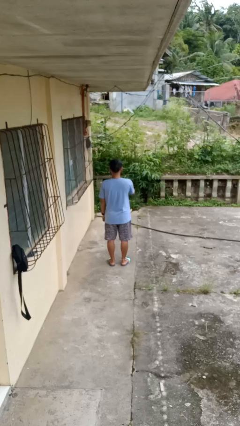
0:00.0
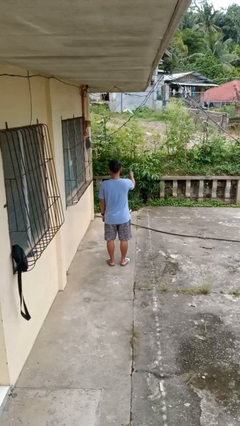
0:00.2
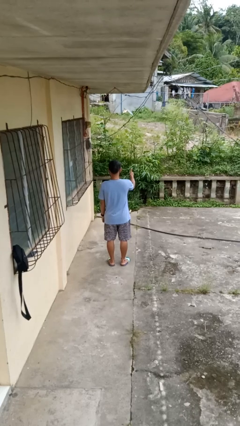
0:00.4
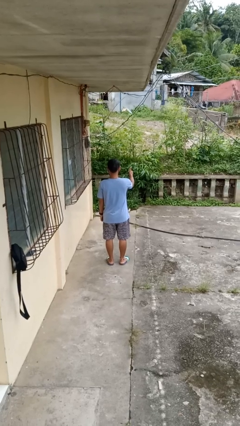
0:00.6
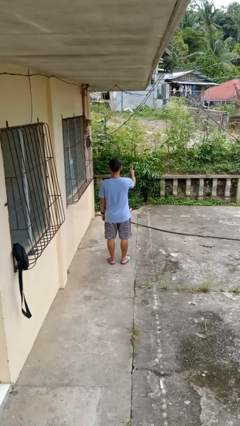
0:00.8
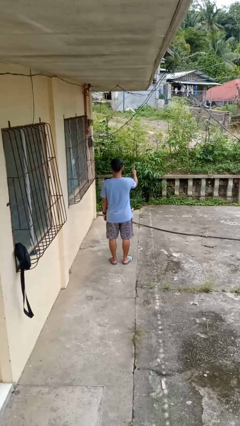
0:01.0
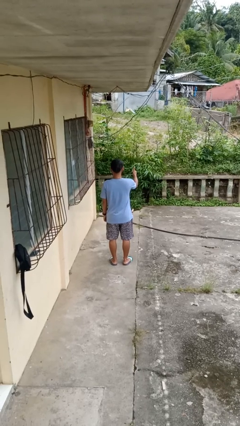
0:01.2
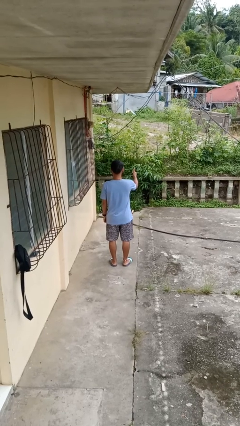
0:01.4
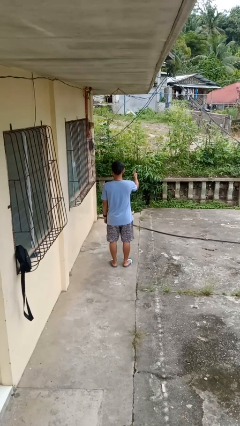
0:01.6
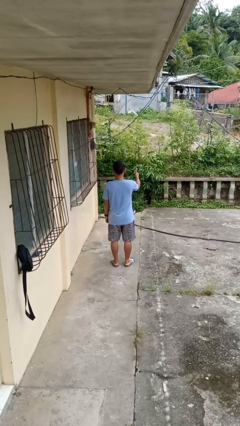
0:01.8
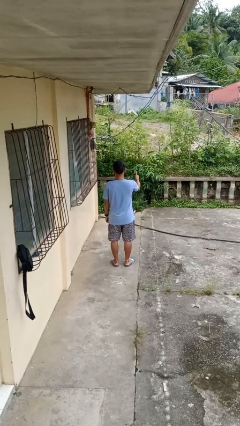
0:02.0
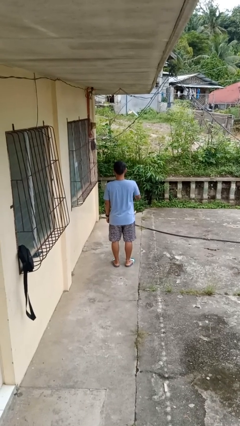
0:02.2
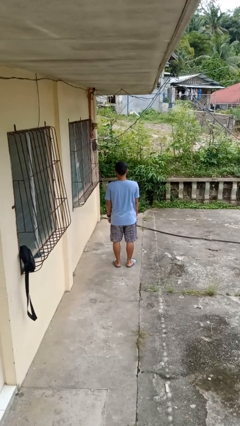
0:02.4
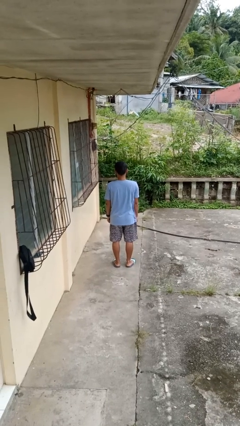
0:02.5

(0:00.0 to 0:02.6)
person gestures thumbs up

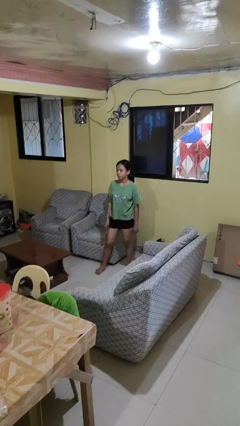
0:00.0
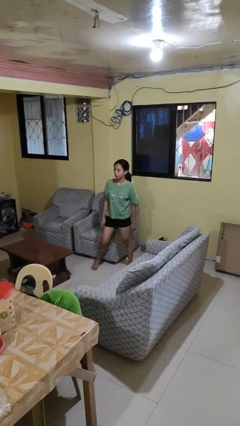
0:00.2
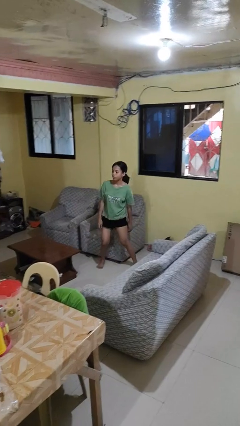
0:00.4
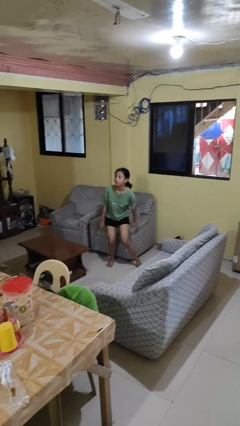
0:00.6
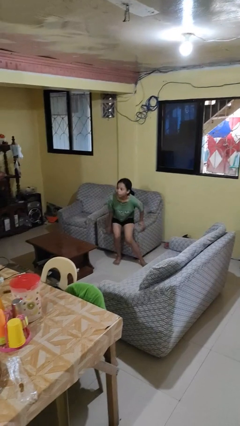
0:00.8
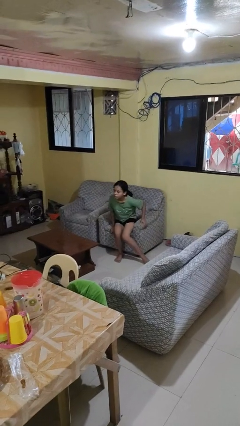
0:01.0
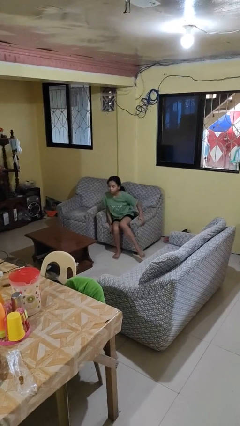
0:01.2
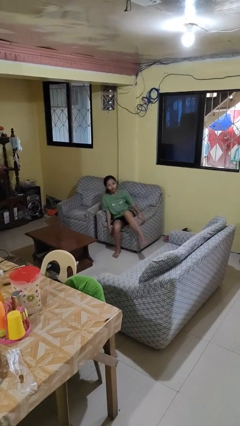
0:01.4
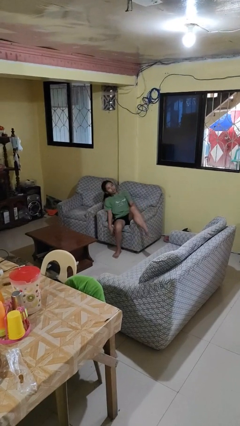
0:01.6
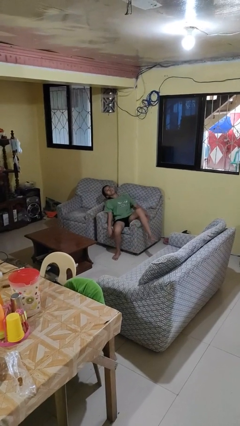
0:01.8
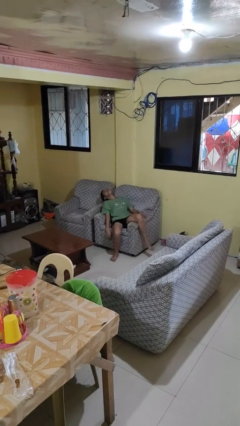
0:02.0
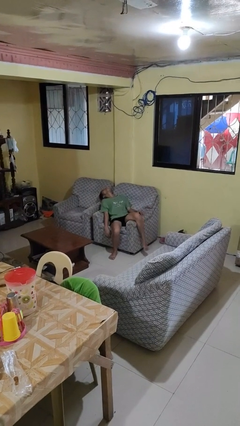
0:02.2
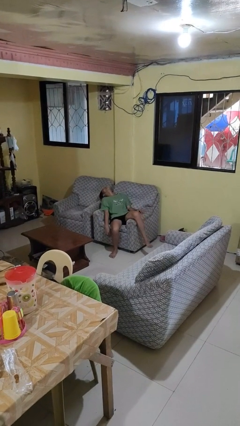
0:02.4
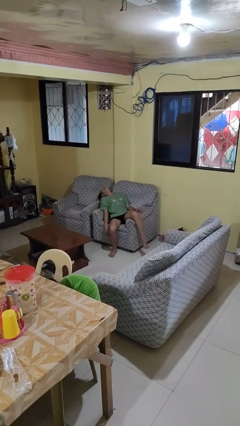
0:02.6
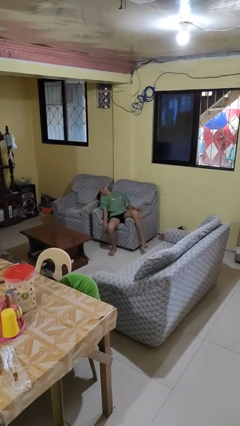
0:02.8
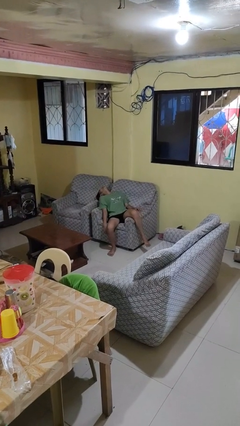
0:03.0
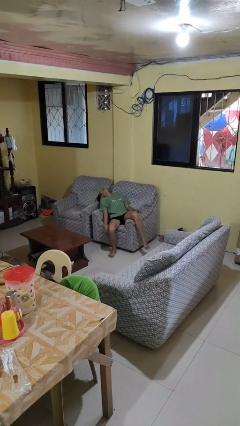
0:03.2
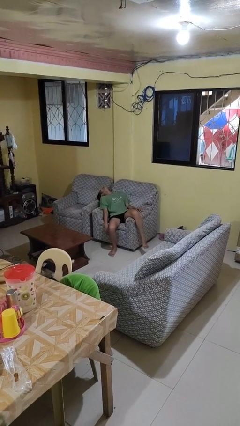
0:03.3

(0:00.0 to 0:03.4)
person lies down on couch

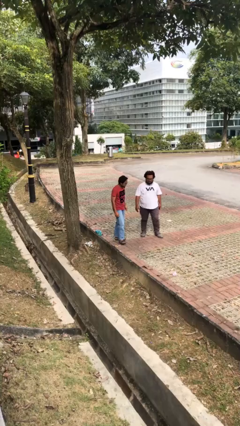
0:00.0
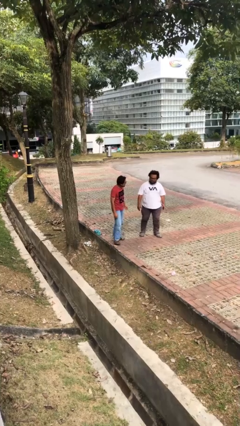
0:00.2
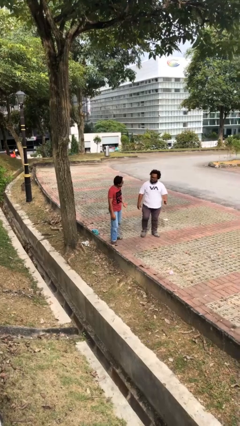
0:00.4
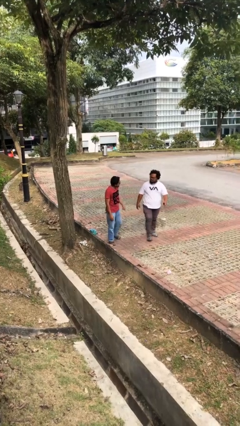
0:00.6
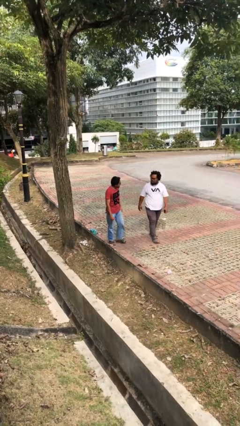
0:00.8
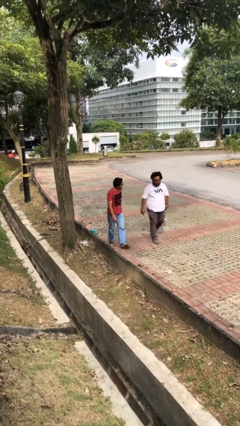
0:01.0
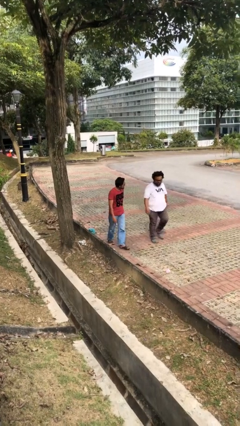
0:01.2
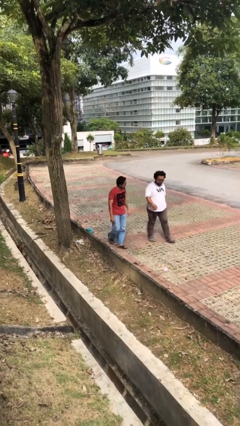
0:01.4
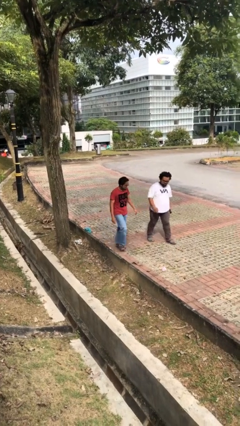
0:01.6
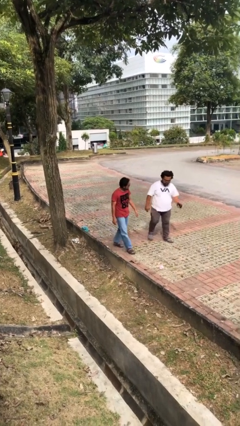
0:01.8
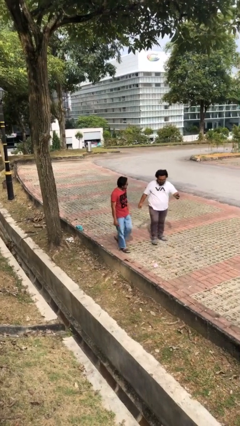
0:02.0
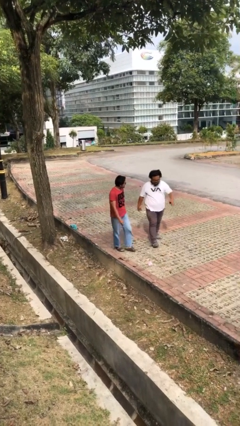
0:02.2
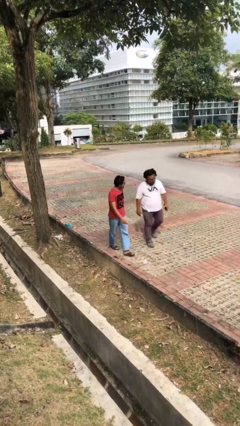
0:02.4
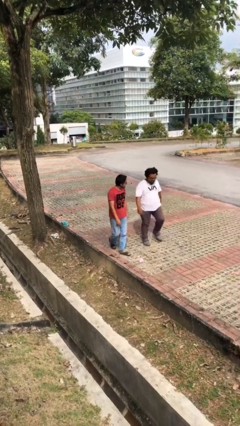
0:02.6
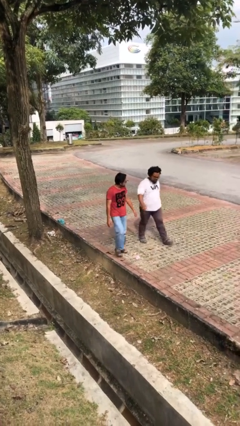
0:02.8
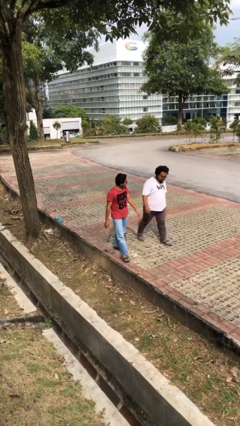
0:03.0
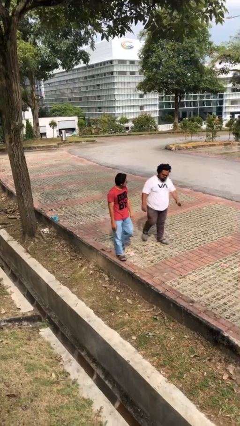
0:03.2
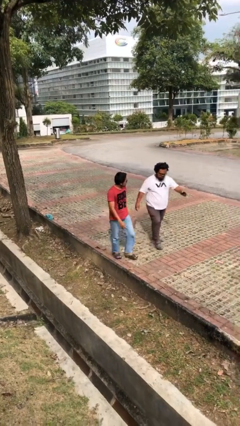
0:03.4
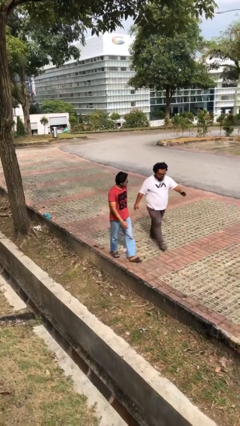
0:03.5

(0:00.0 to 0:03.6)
person talks to person

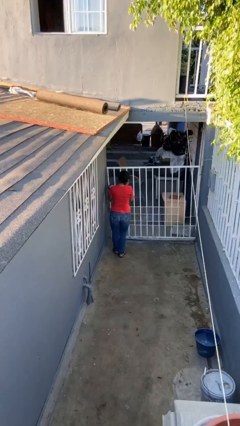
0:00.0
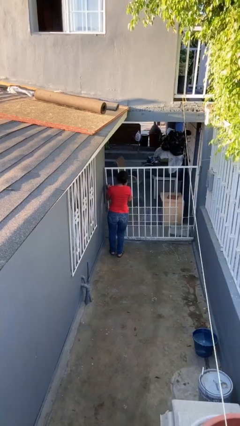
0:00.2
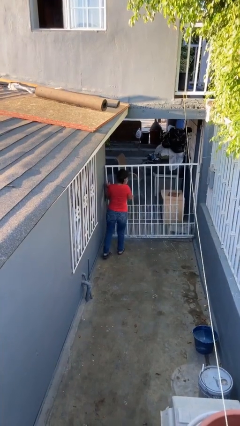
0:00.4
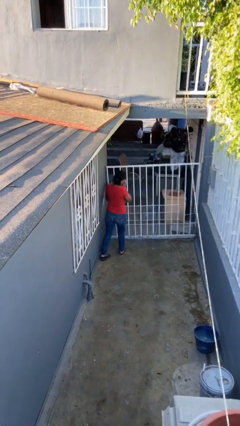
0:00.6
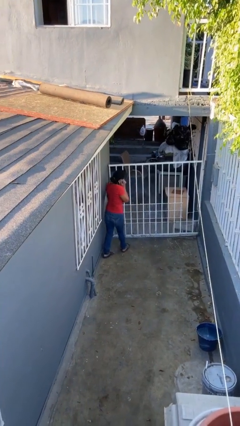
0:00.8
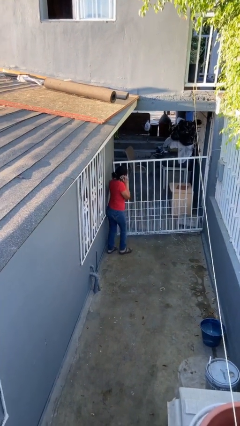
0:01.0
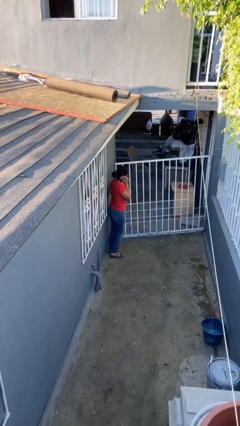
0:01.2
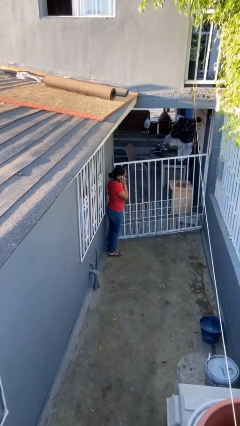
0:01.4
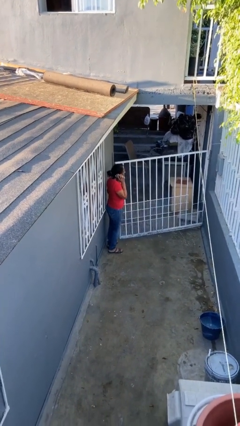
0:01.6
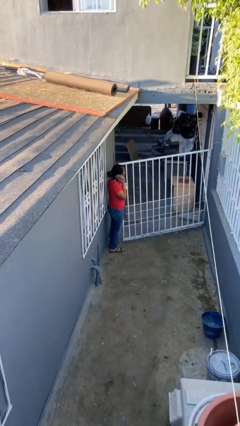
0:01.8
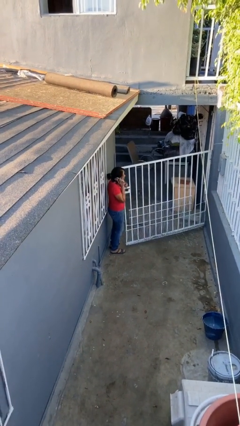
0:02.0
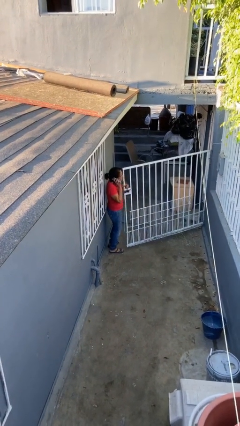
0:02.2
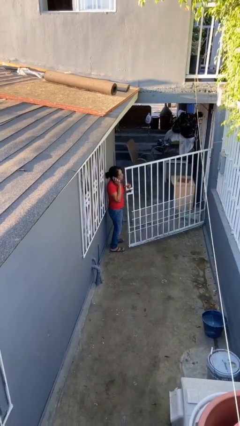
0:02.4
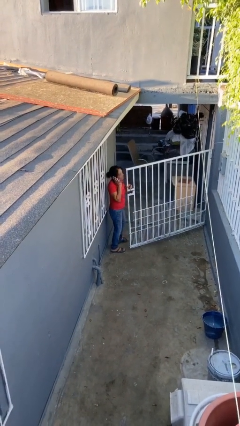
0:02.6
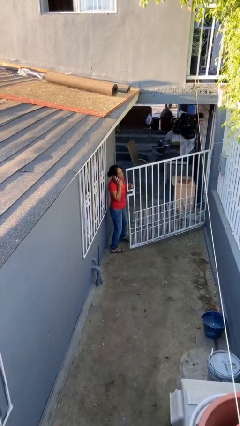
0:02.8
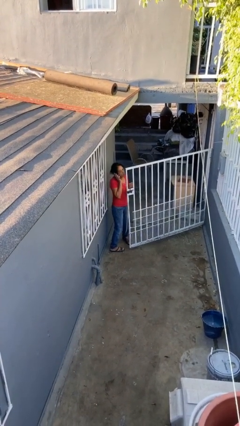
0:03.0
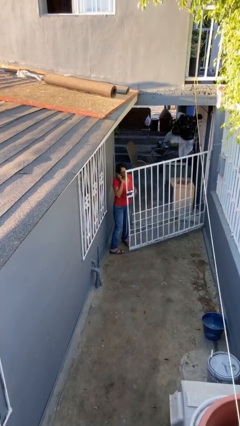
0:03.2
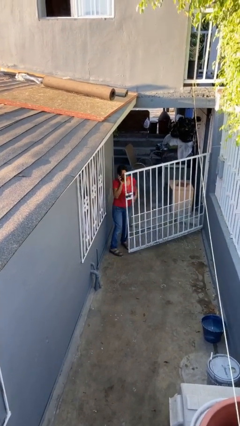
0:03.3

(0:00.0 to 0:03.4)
person opens facility door

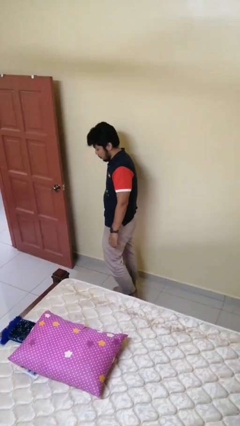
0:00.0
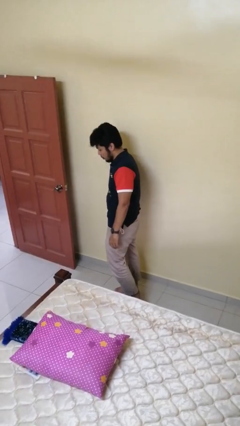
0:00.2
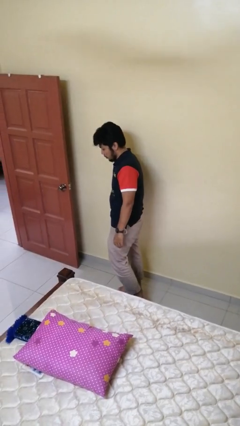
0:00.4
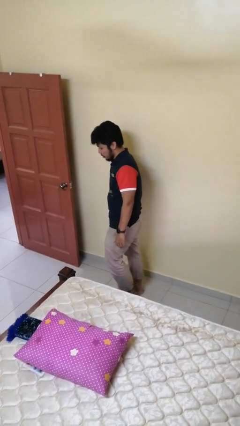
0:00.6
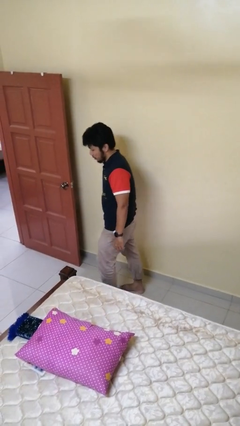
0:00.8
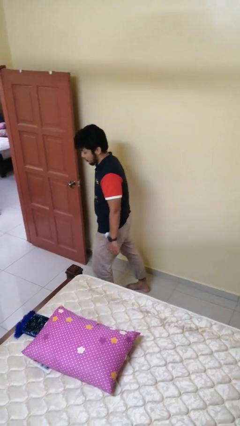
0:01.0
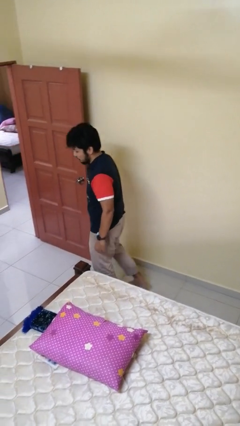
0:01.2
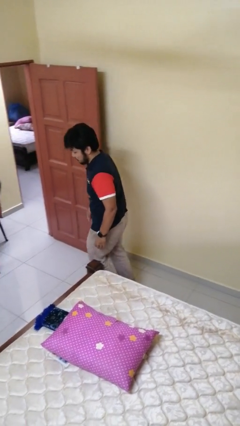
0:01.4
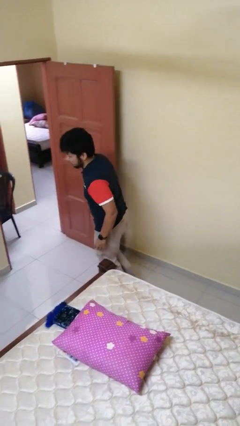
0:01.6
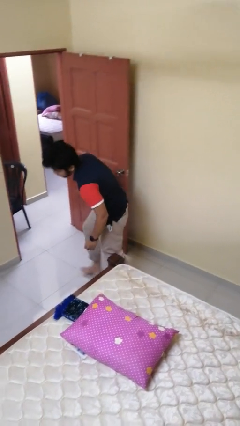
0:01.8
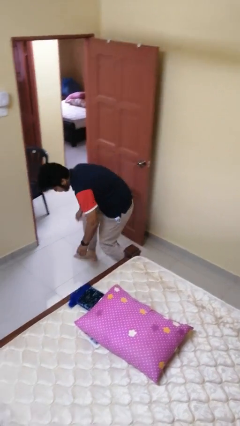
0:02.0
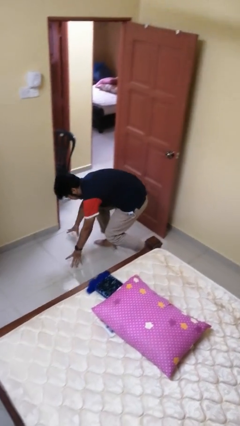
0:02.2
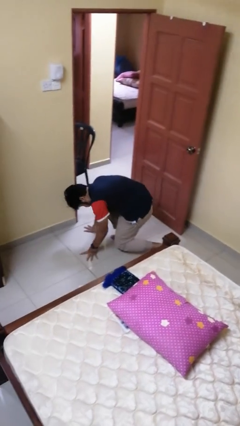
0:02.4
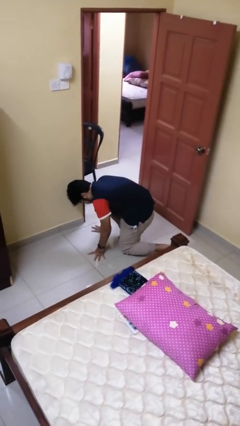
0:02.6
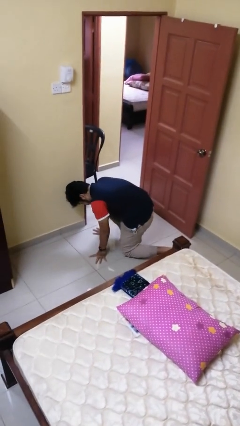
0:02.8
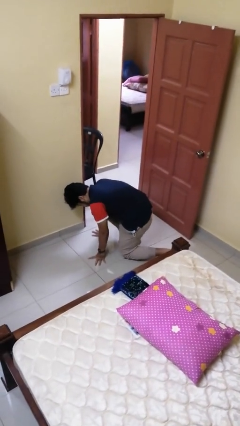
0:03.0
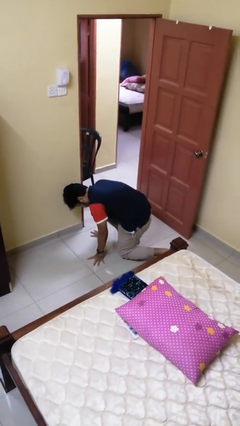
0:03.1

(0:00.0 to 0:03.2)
person trips on object on floor

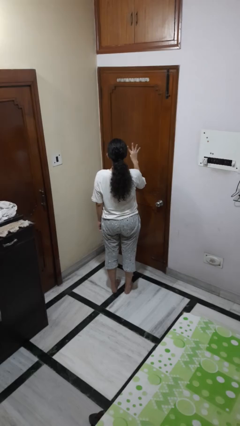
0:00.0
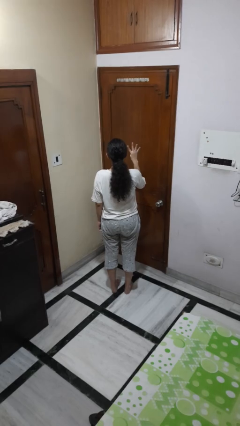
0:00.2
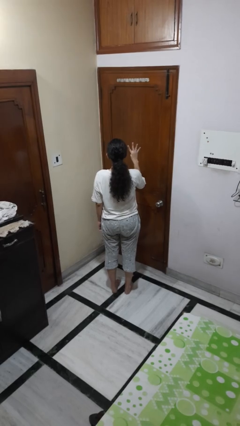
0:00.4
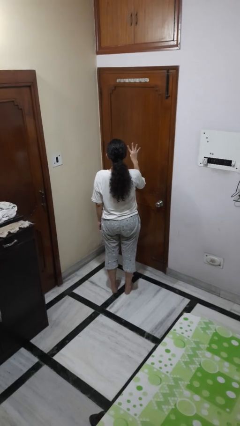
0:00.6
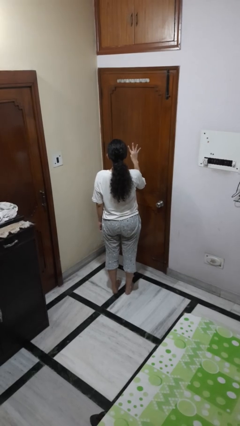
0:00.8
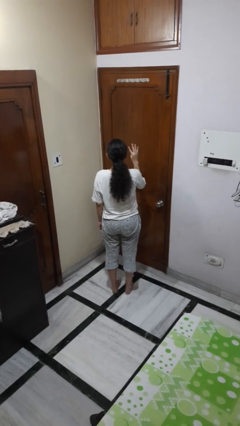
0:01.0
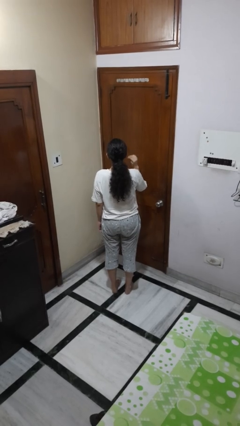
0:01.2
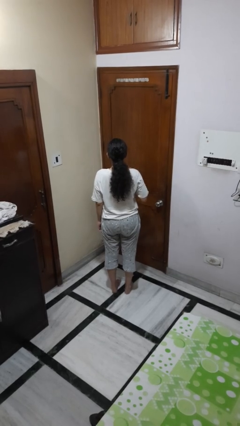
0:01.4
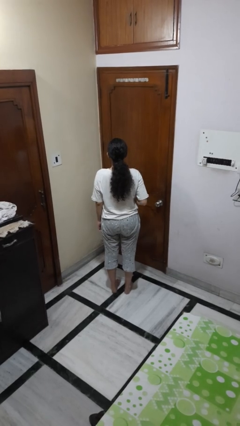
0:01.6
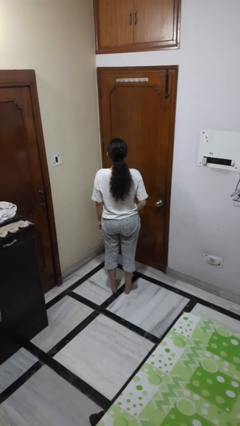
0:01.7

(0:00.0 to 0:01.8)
person gestures number four
